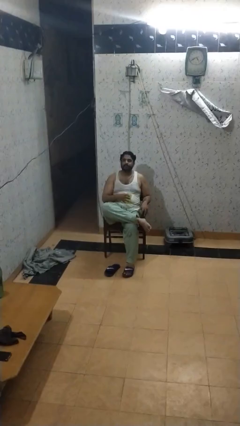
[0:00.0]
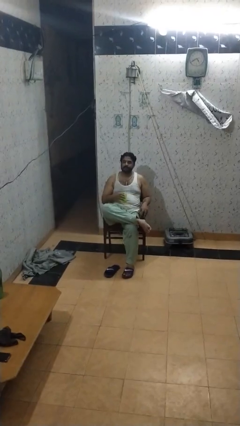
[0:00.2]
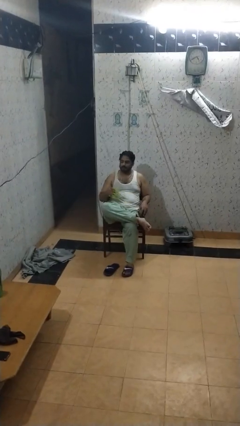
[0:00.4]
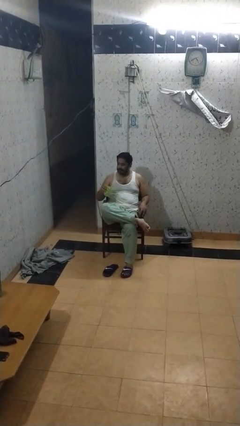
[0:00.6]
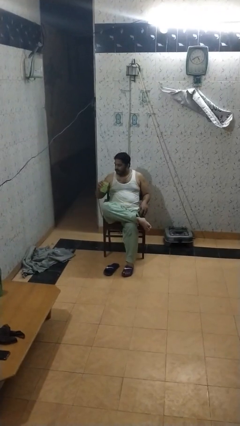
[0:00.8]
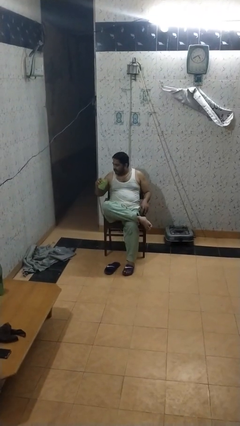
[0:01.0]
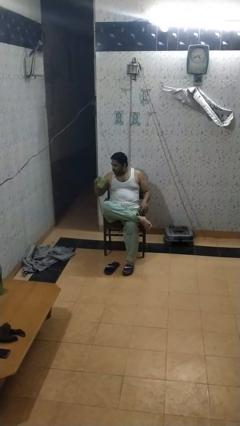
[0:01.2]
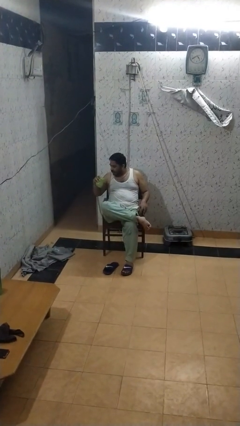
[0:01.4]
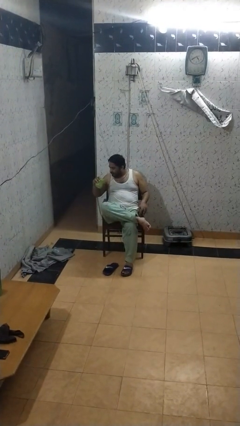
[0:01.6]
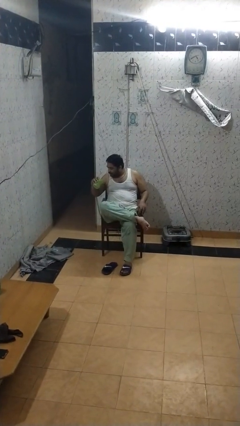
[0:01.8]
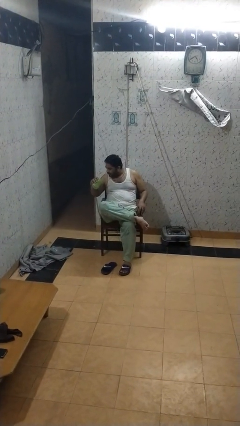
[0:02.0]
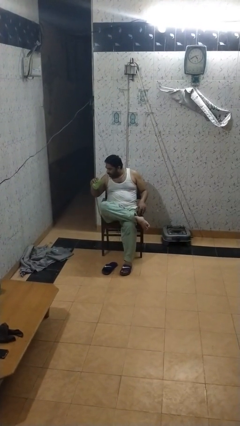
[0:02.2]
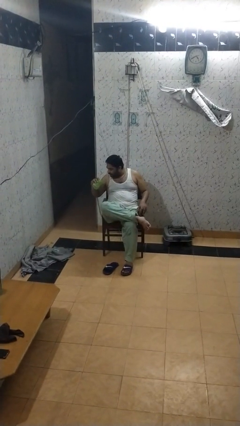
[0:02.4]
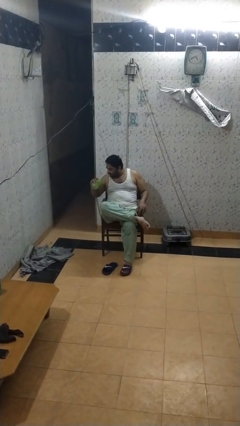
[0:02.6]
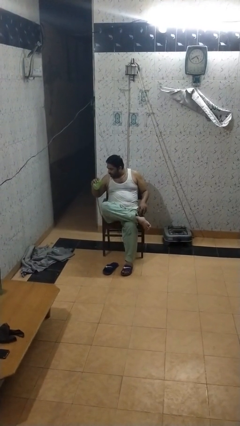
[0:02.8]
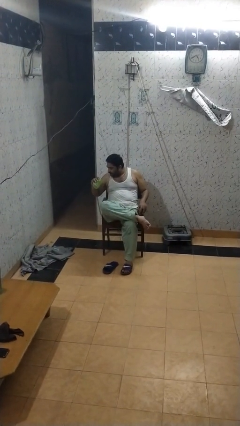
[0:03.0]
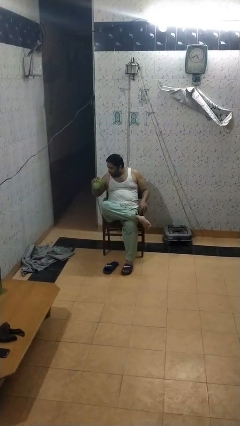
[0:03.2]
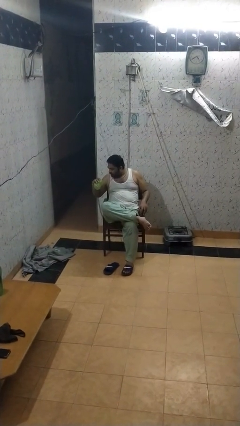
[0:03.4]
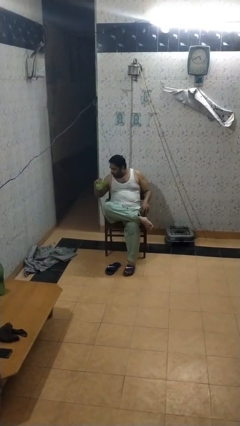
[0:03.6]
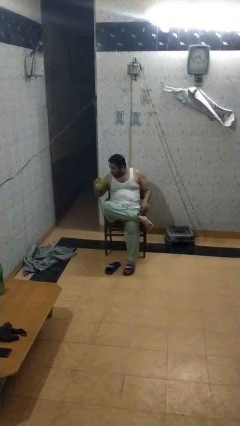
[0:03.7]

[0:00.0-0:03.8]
person drinks from straw

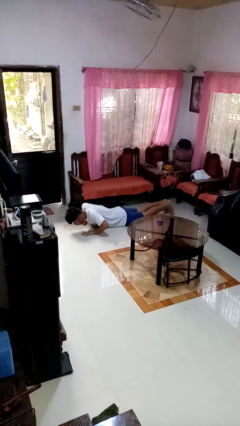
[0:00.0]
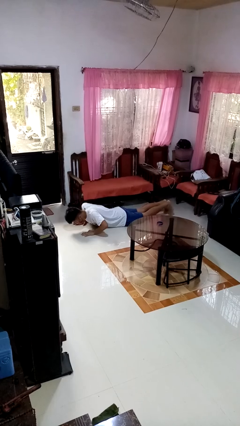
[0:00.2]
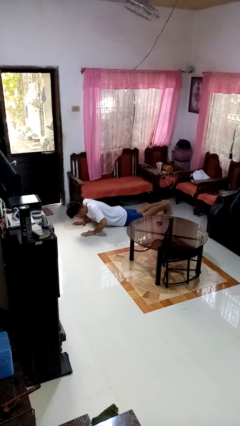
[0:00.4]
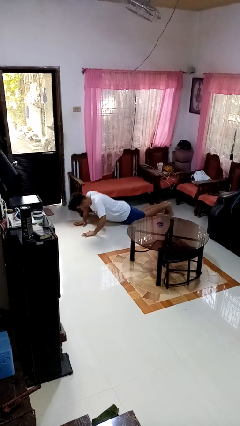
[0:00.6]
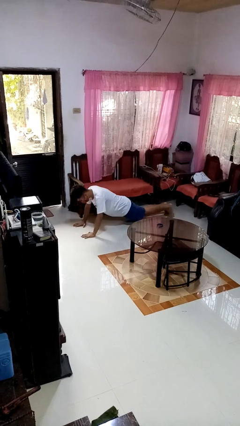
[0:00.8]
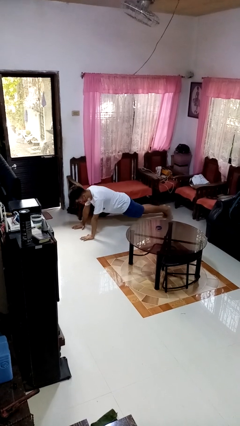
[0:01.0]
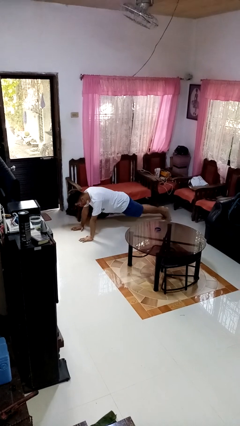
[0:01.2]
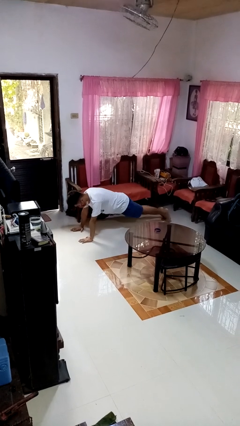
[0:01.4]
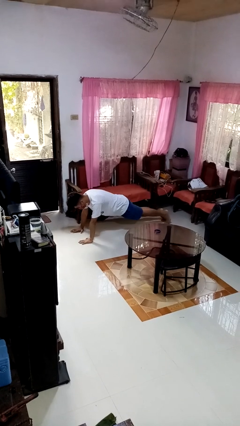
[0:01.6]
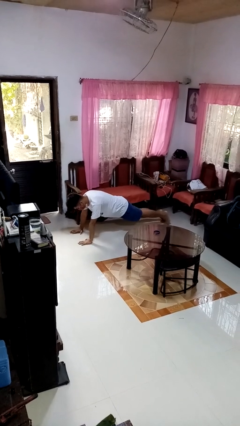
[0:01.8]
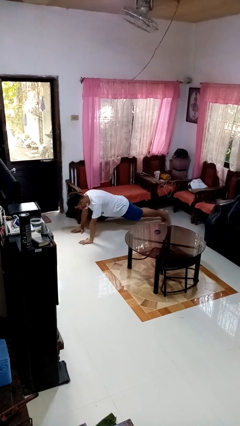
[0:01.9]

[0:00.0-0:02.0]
person exercises with pushup

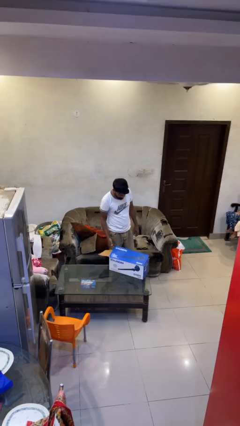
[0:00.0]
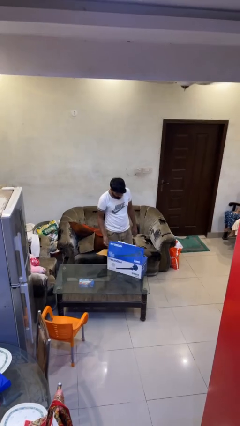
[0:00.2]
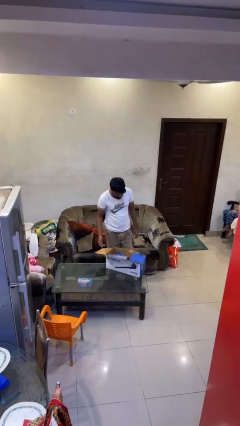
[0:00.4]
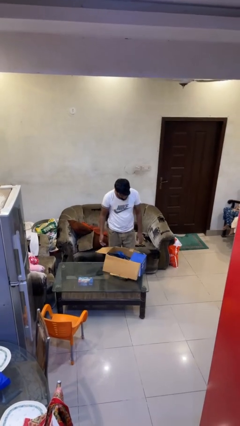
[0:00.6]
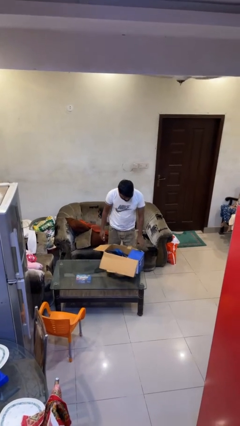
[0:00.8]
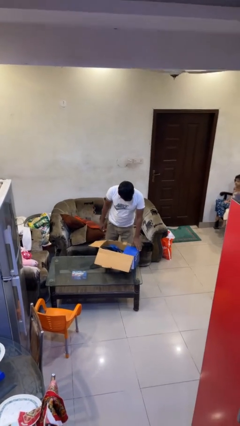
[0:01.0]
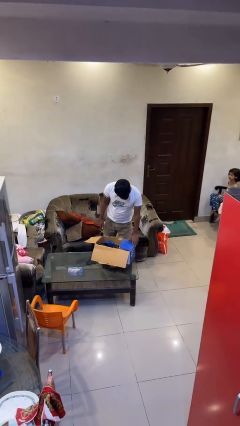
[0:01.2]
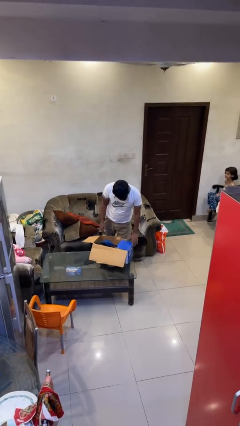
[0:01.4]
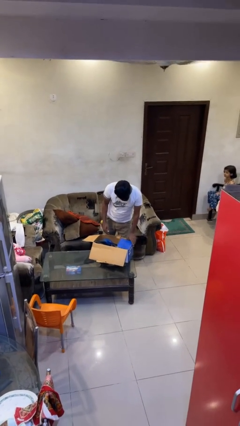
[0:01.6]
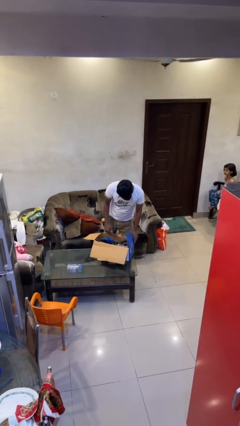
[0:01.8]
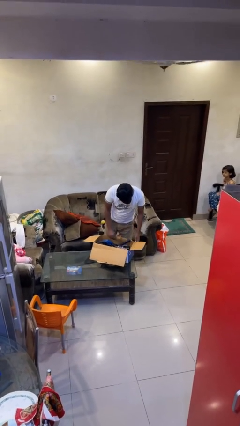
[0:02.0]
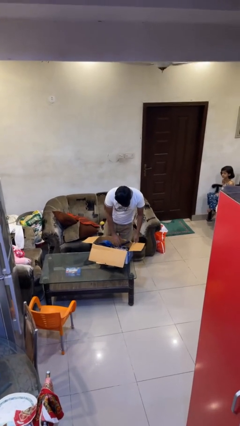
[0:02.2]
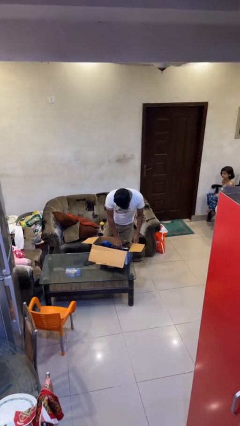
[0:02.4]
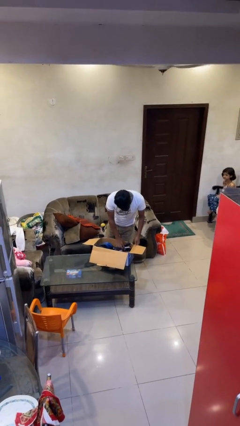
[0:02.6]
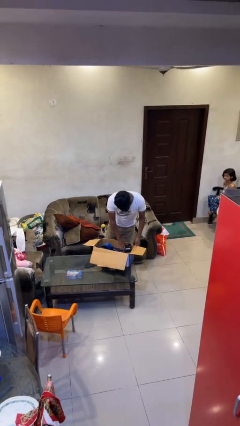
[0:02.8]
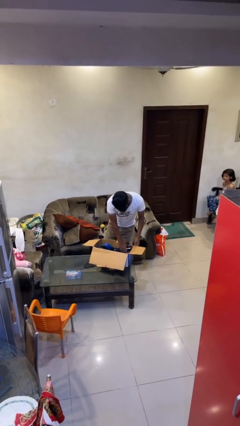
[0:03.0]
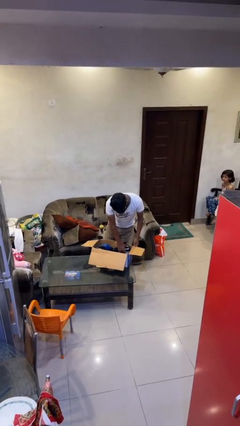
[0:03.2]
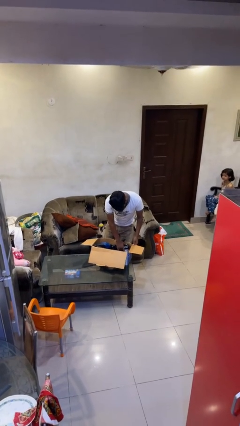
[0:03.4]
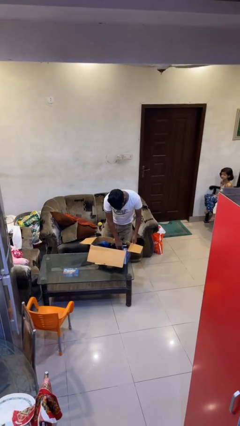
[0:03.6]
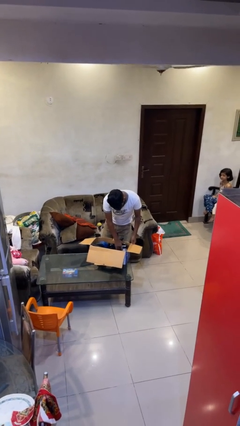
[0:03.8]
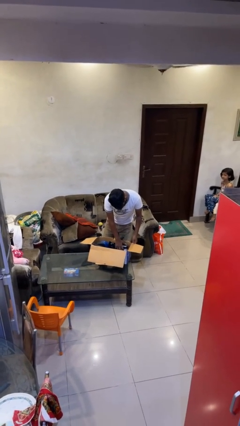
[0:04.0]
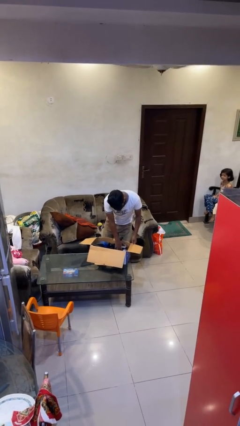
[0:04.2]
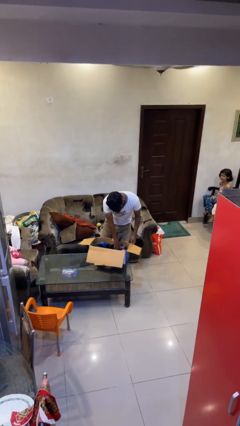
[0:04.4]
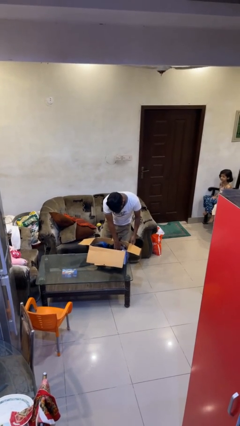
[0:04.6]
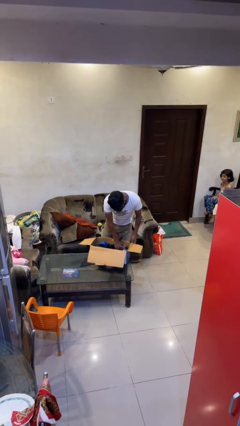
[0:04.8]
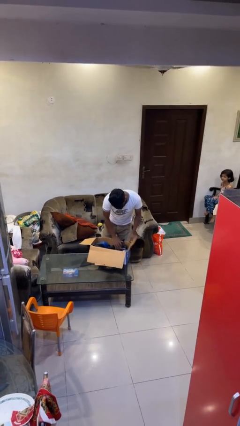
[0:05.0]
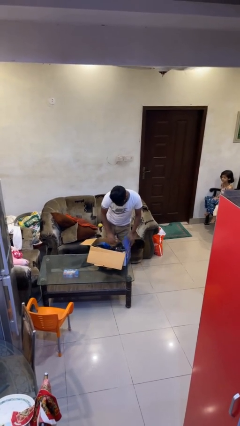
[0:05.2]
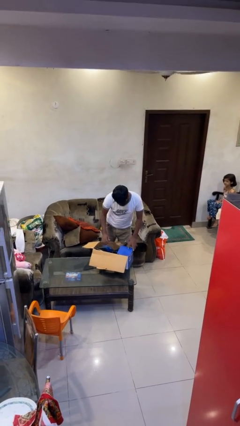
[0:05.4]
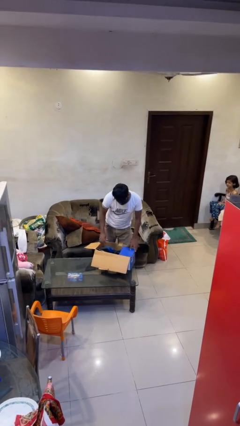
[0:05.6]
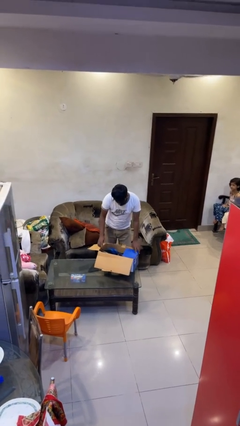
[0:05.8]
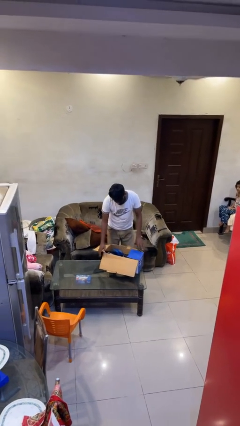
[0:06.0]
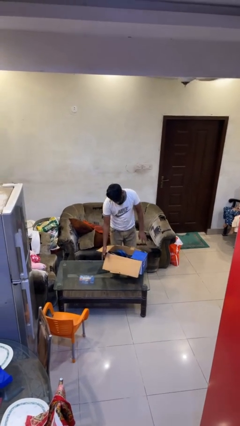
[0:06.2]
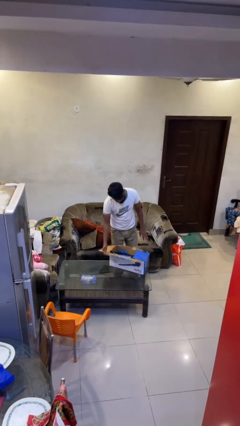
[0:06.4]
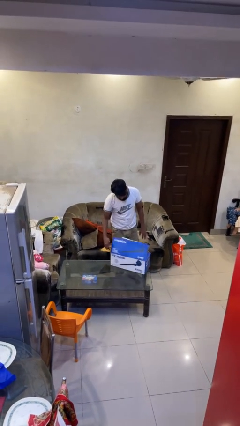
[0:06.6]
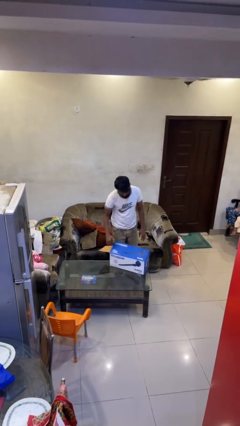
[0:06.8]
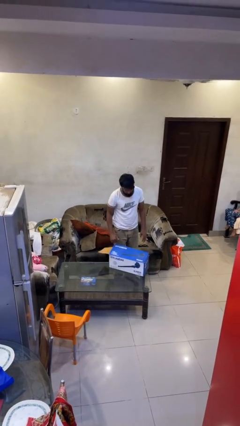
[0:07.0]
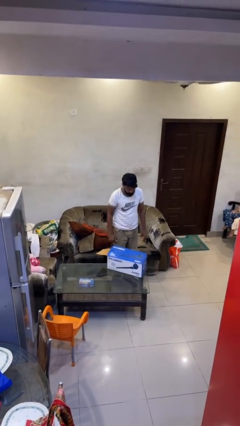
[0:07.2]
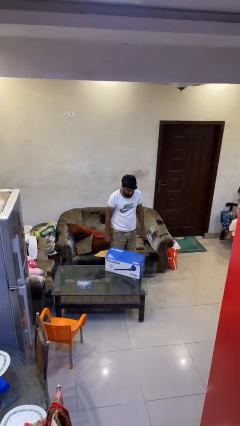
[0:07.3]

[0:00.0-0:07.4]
person searches in box

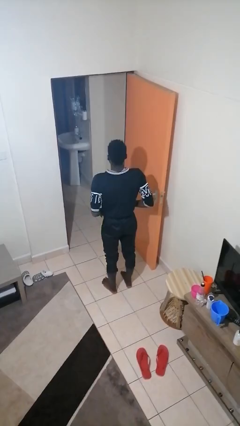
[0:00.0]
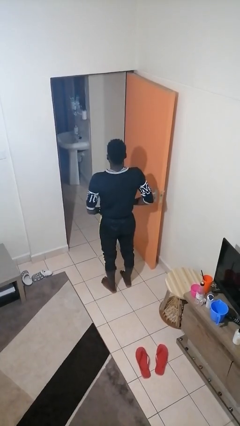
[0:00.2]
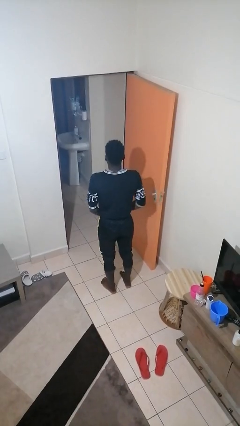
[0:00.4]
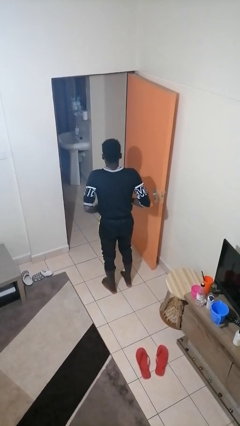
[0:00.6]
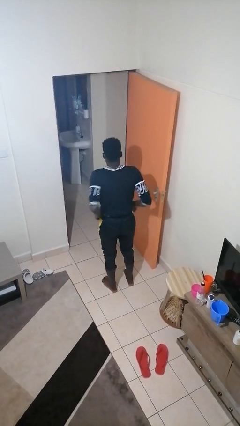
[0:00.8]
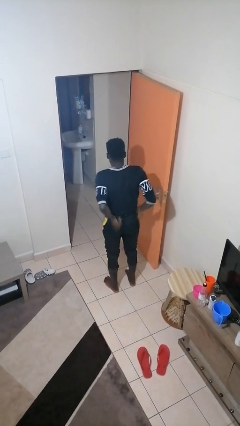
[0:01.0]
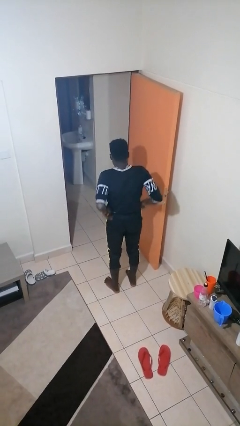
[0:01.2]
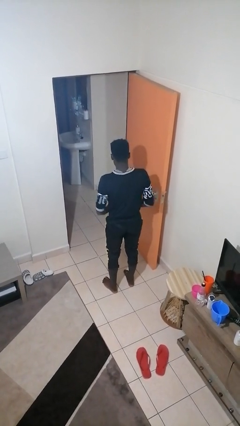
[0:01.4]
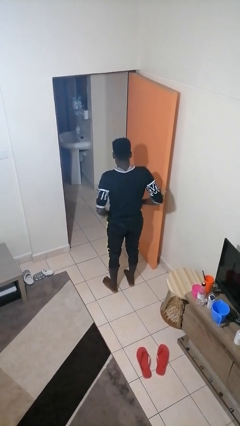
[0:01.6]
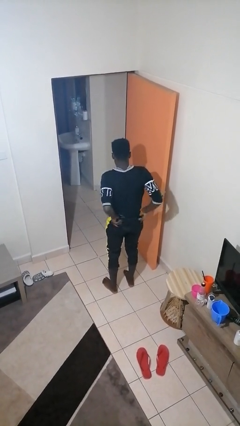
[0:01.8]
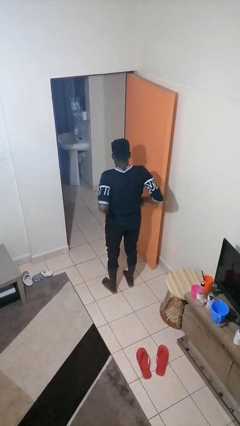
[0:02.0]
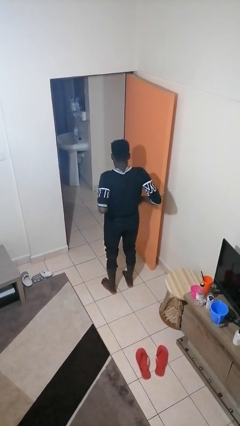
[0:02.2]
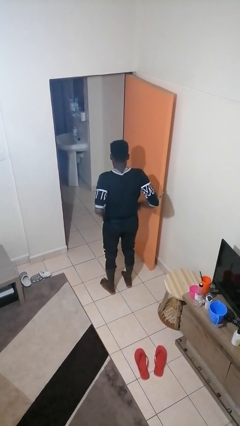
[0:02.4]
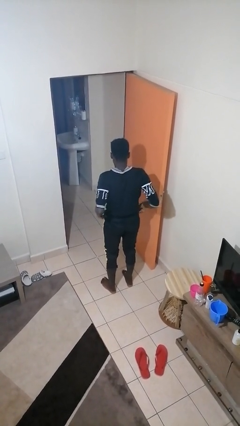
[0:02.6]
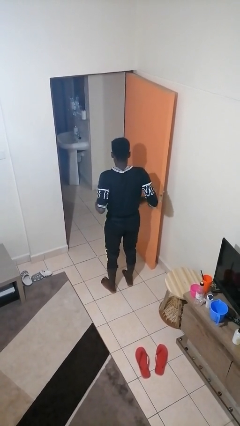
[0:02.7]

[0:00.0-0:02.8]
person hikes up pants

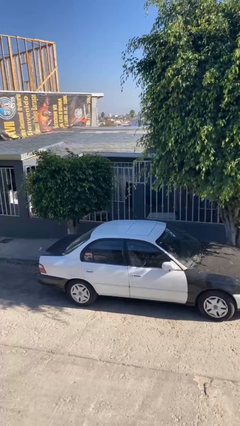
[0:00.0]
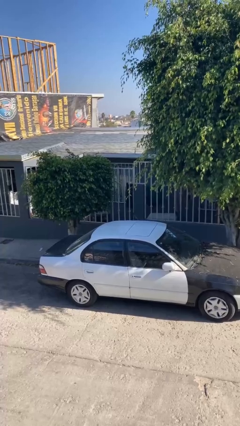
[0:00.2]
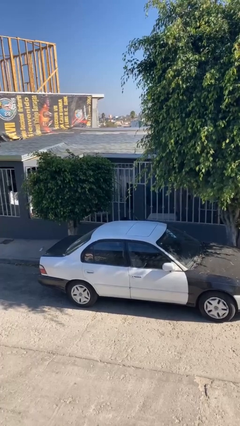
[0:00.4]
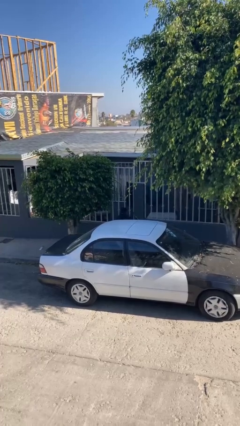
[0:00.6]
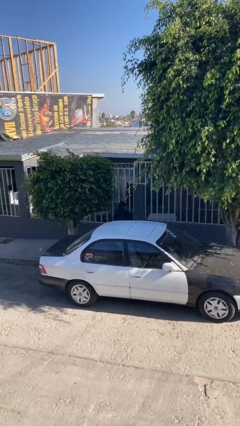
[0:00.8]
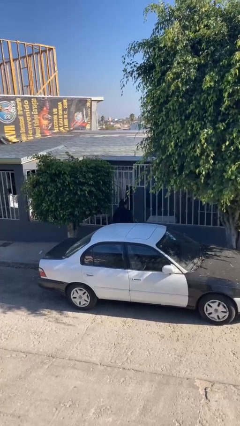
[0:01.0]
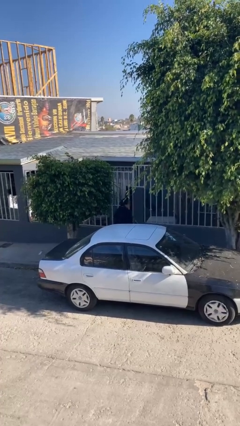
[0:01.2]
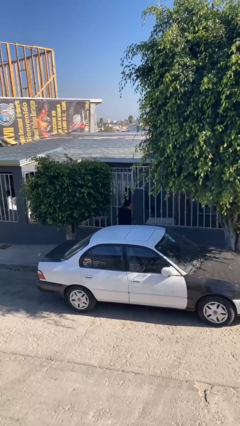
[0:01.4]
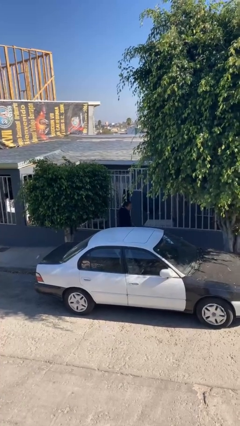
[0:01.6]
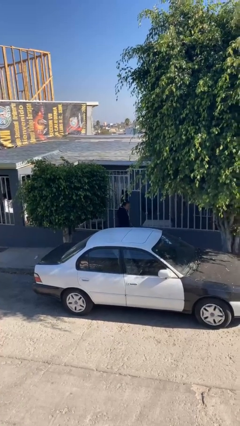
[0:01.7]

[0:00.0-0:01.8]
person exits car
